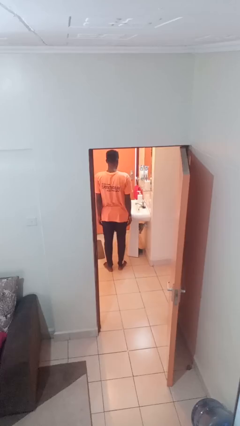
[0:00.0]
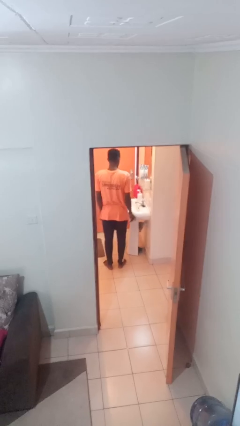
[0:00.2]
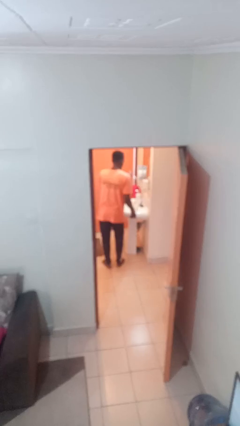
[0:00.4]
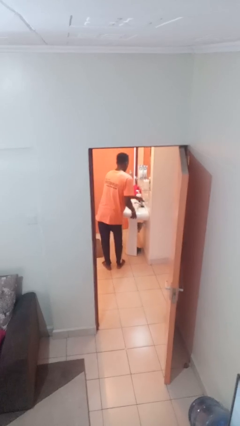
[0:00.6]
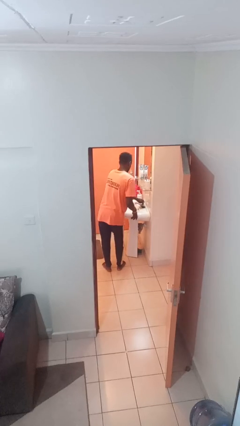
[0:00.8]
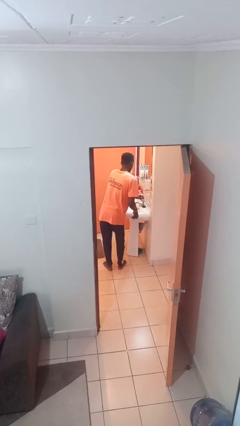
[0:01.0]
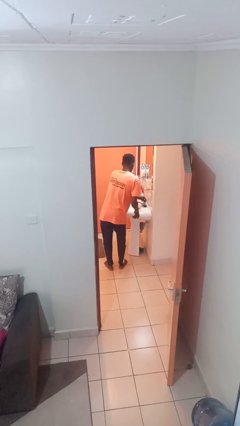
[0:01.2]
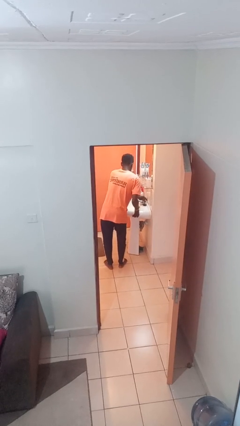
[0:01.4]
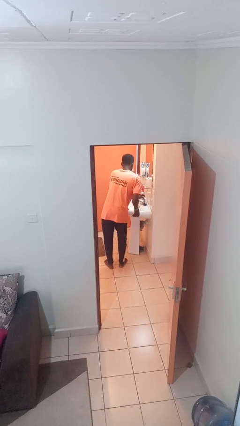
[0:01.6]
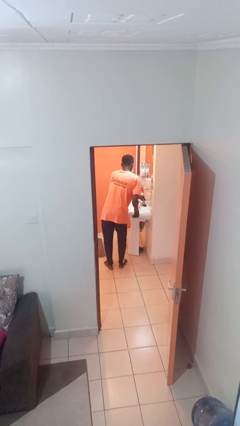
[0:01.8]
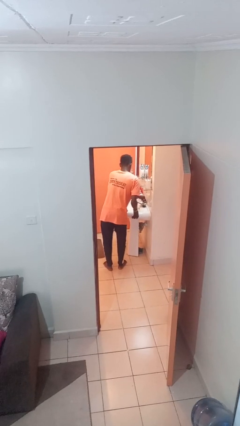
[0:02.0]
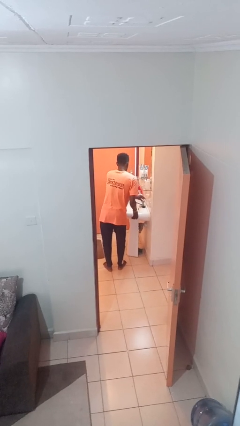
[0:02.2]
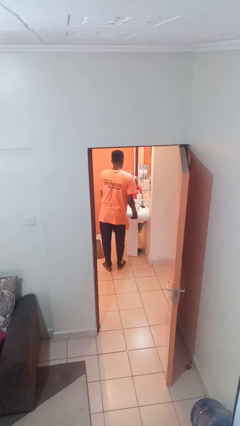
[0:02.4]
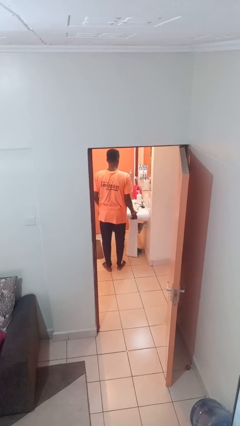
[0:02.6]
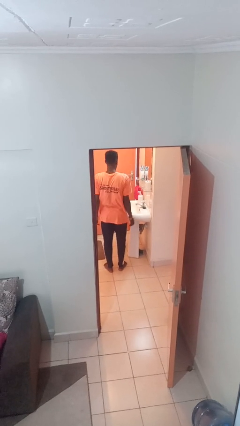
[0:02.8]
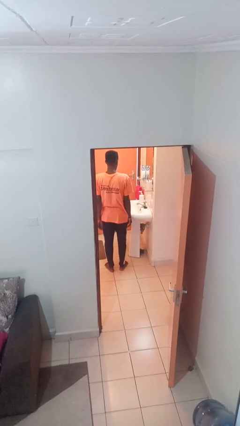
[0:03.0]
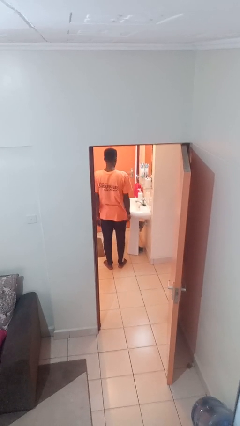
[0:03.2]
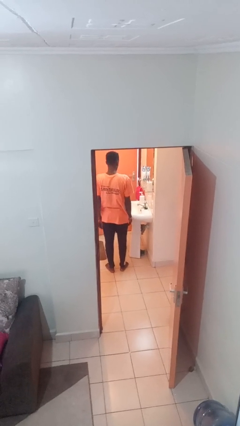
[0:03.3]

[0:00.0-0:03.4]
person turns off faucet

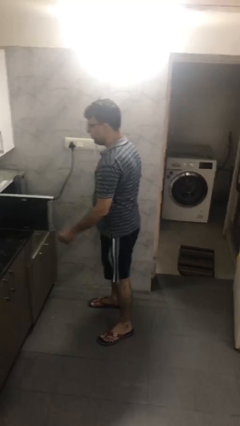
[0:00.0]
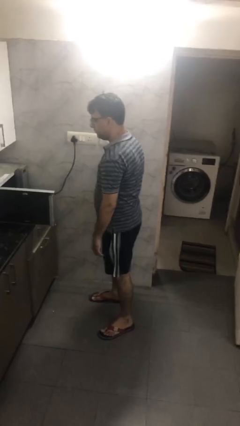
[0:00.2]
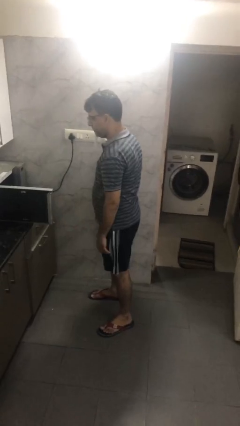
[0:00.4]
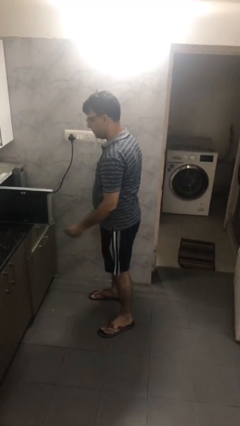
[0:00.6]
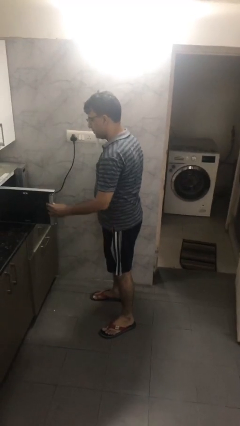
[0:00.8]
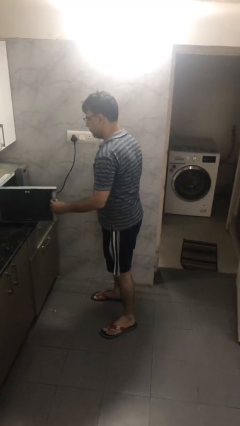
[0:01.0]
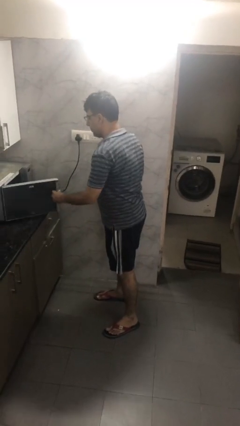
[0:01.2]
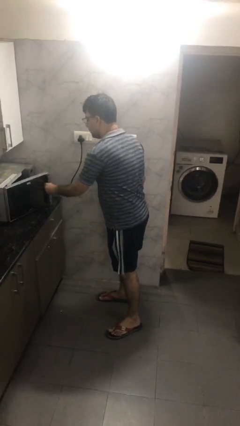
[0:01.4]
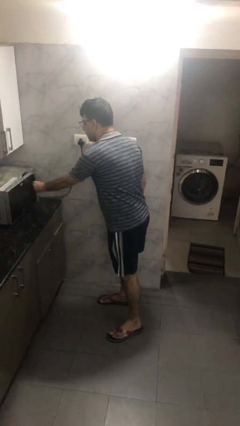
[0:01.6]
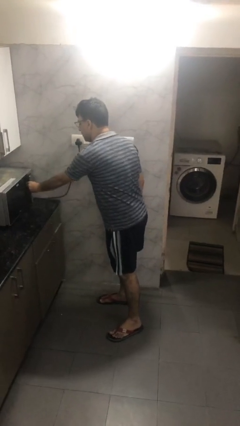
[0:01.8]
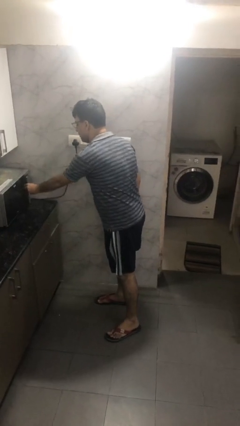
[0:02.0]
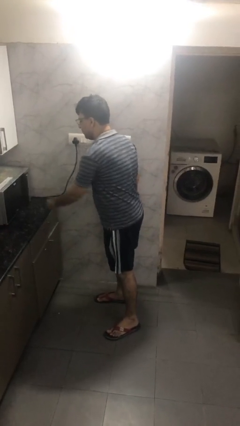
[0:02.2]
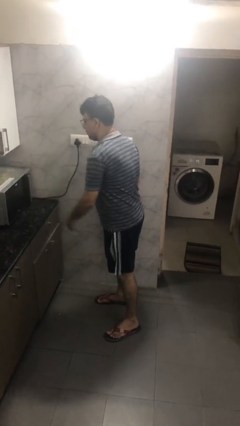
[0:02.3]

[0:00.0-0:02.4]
person closes microwave

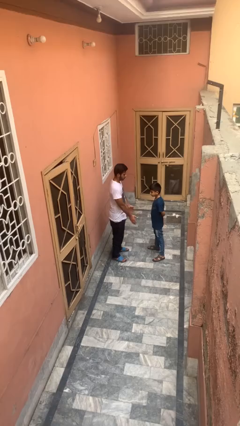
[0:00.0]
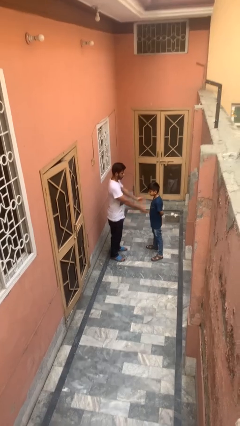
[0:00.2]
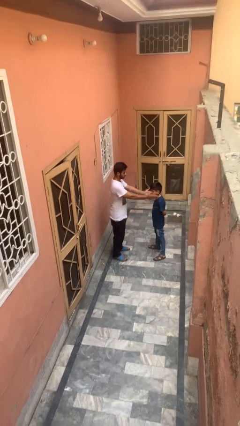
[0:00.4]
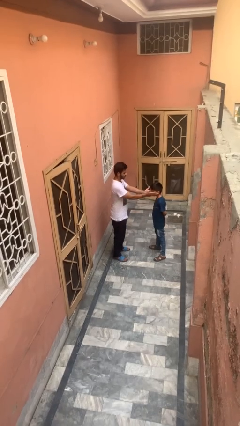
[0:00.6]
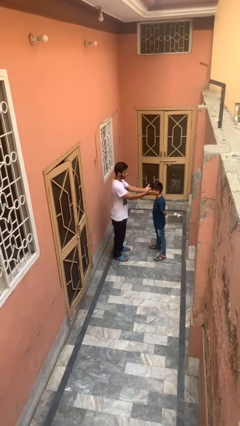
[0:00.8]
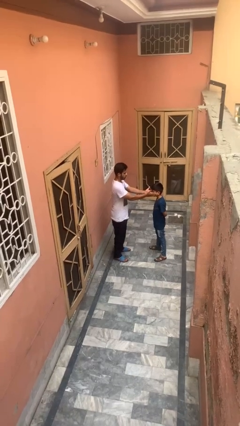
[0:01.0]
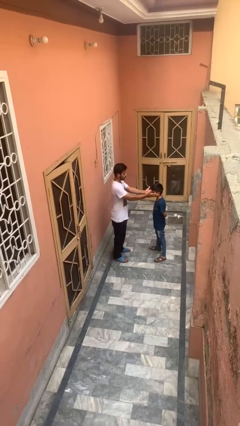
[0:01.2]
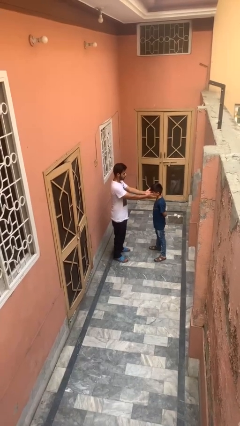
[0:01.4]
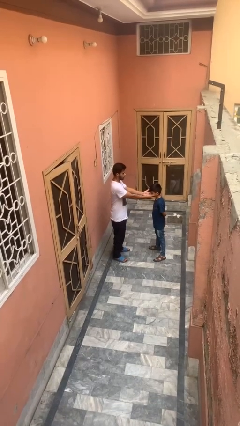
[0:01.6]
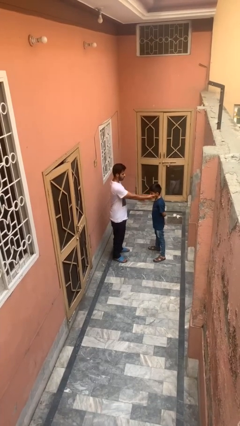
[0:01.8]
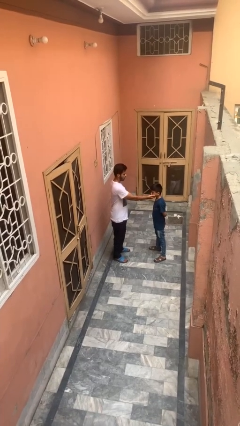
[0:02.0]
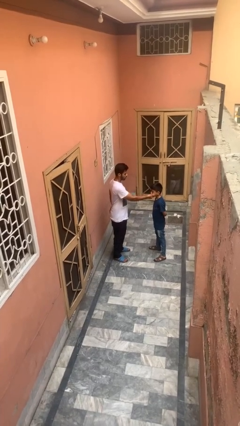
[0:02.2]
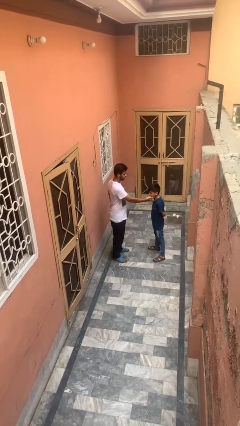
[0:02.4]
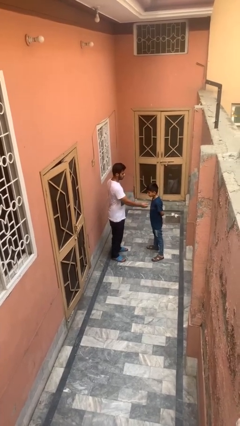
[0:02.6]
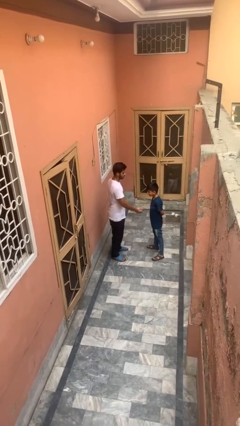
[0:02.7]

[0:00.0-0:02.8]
person touches face of person

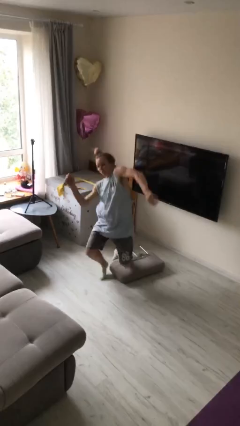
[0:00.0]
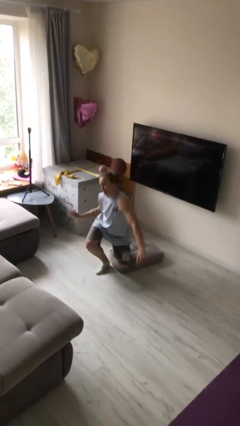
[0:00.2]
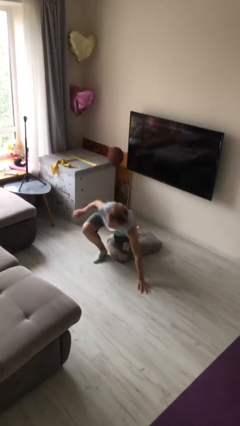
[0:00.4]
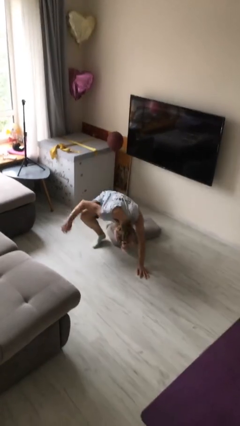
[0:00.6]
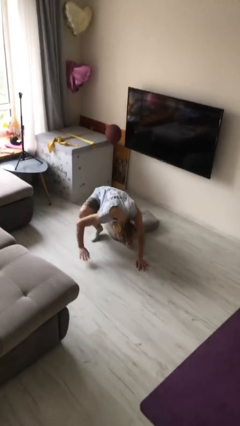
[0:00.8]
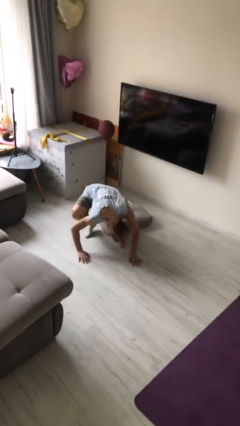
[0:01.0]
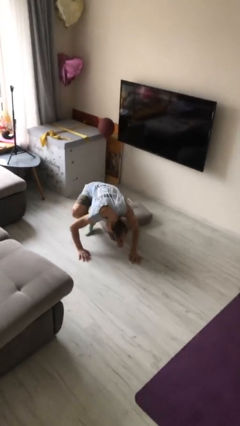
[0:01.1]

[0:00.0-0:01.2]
person trips on object on floor

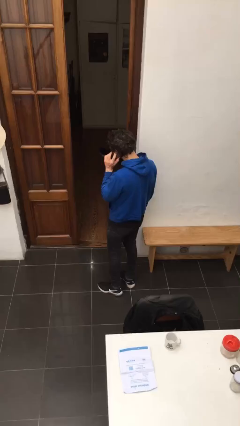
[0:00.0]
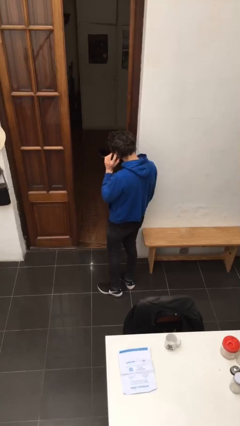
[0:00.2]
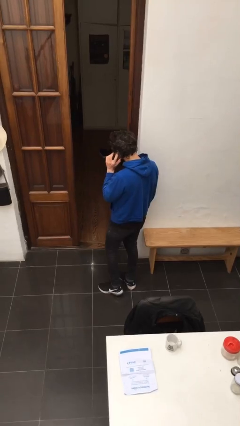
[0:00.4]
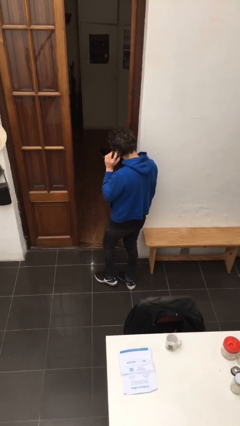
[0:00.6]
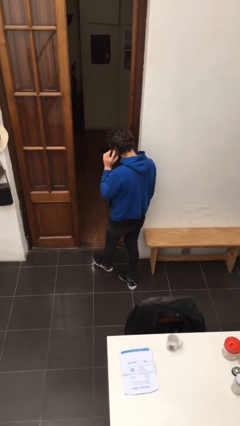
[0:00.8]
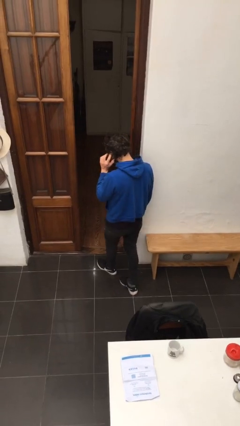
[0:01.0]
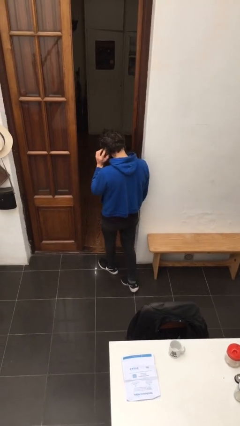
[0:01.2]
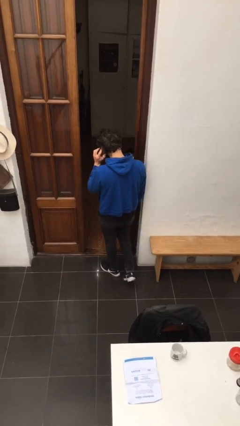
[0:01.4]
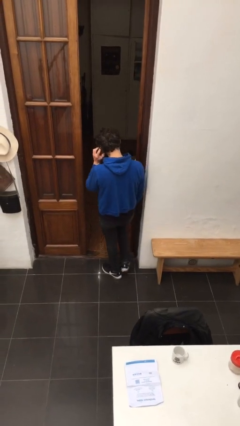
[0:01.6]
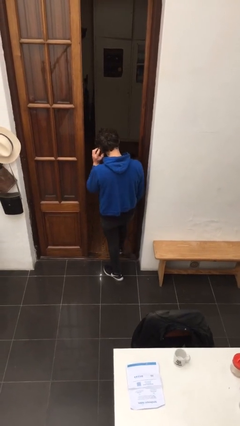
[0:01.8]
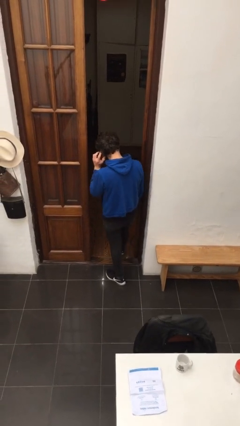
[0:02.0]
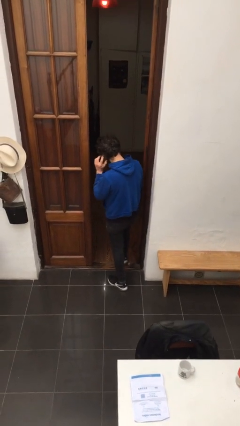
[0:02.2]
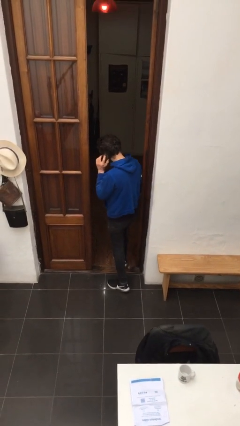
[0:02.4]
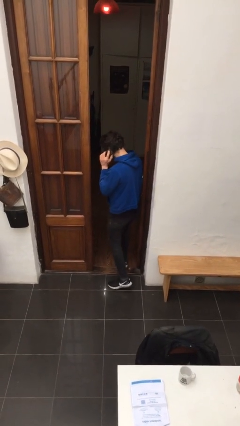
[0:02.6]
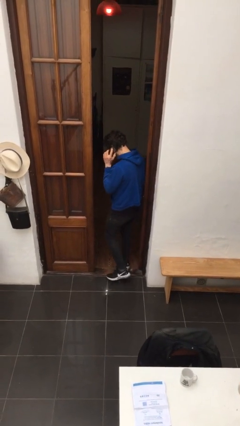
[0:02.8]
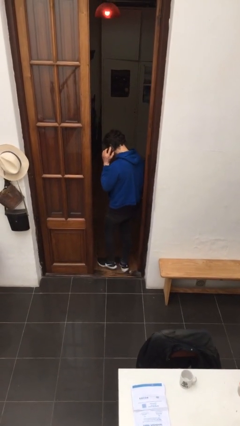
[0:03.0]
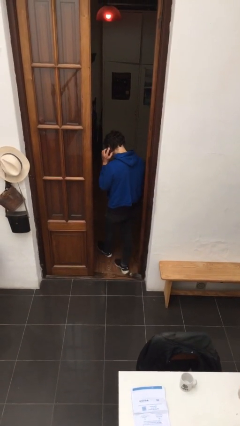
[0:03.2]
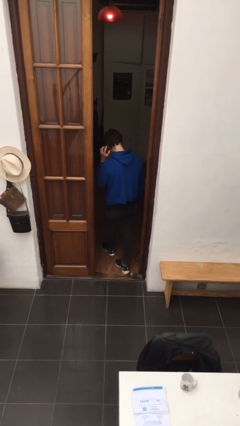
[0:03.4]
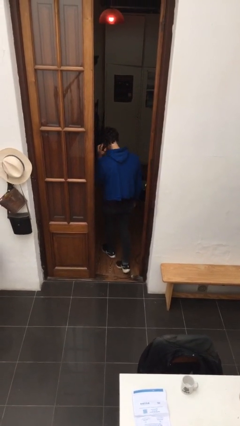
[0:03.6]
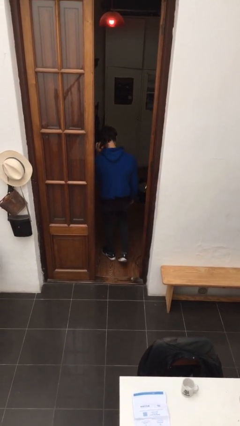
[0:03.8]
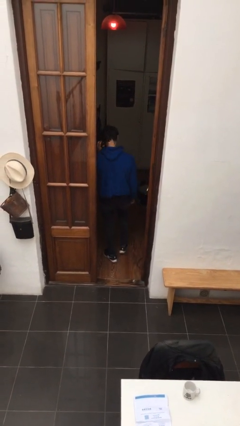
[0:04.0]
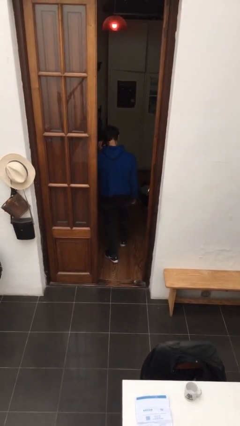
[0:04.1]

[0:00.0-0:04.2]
person exits scene through structure

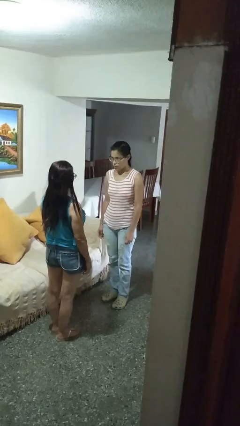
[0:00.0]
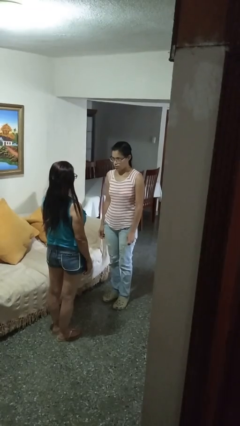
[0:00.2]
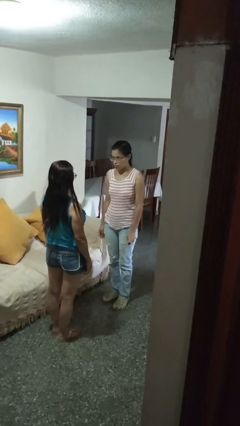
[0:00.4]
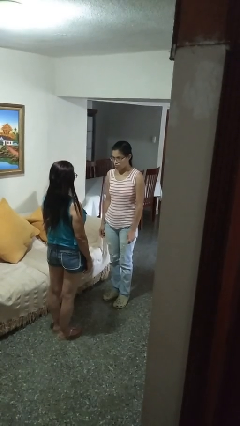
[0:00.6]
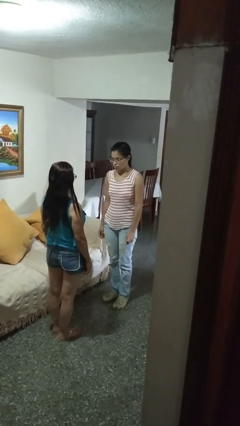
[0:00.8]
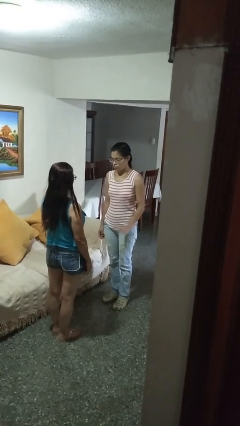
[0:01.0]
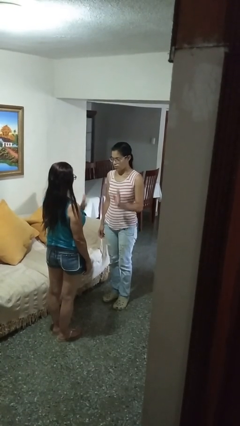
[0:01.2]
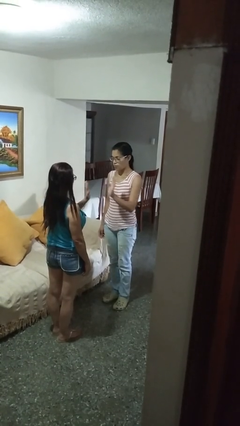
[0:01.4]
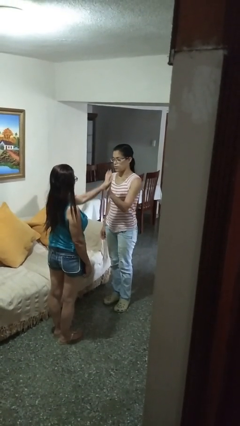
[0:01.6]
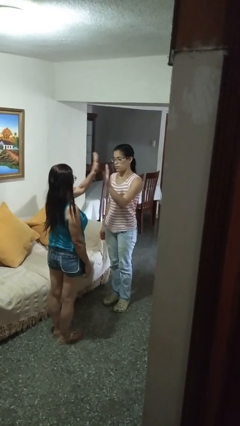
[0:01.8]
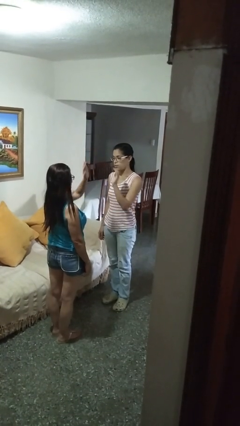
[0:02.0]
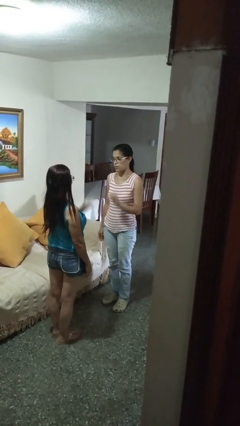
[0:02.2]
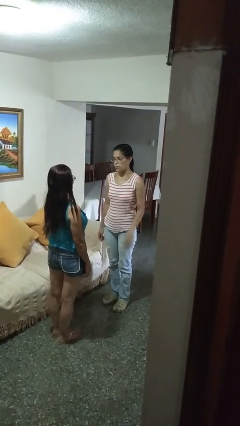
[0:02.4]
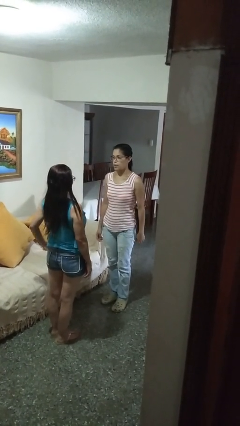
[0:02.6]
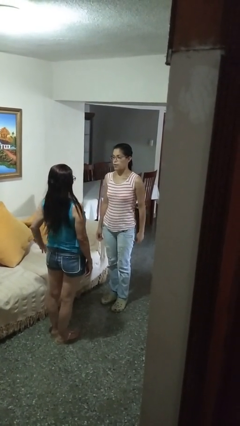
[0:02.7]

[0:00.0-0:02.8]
person highfives hand

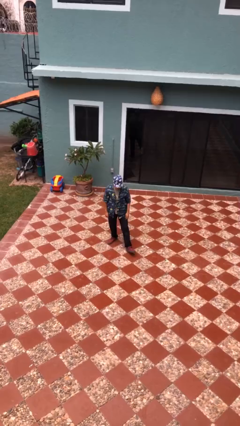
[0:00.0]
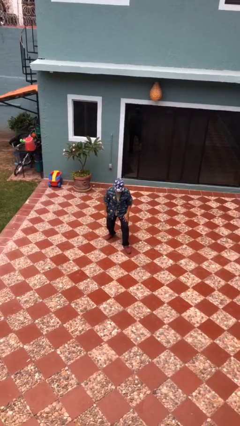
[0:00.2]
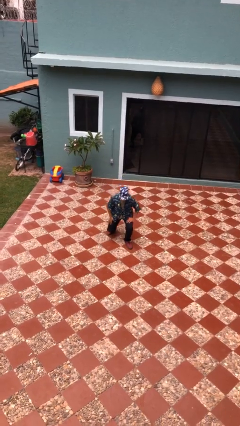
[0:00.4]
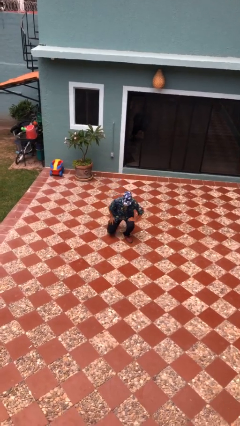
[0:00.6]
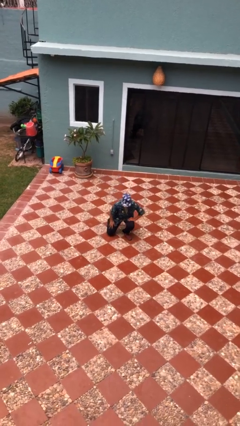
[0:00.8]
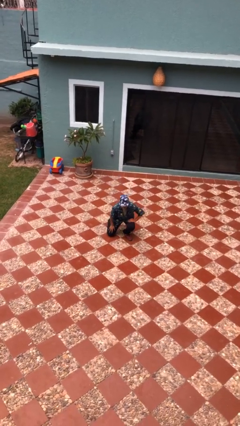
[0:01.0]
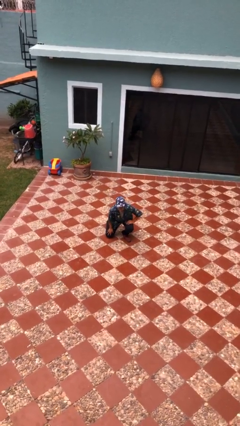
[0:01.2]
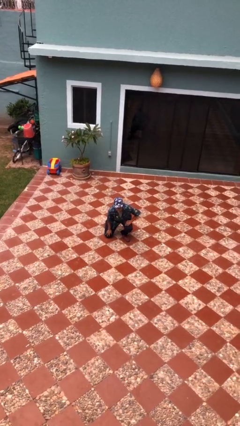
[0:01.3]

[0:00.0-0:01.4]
person kneels
